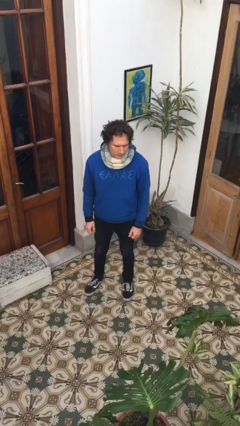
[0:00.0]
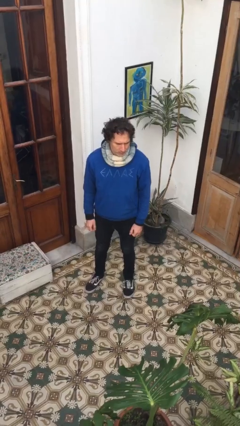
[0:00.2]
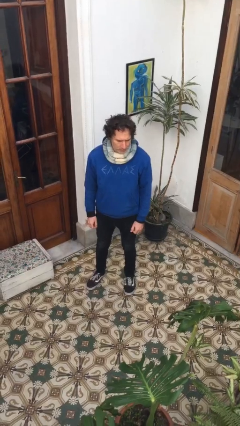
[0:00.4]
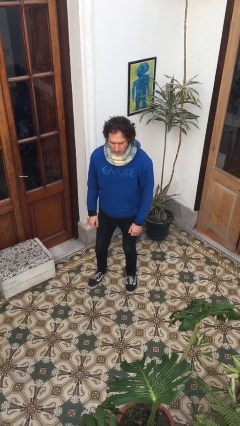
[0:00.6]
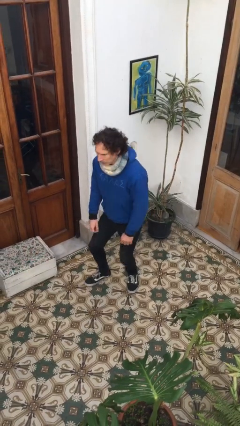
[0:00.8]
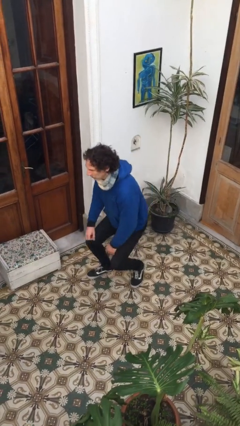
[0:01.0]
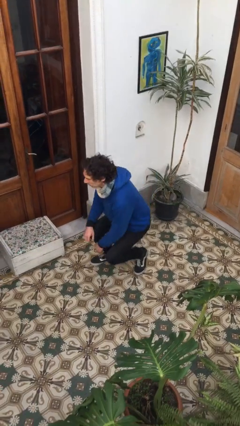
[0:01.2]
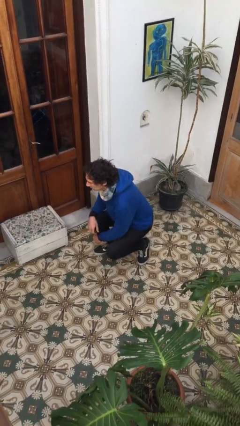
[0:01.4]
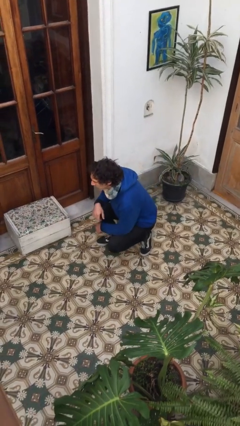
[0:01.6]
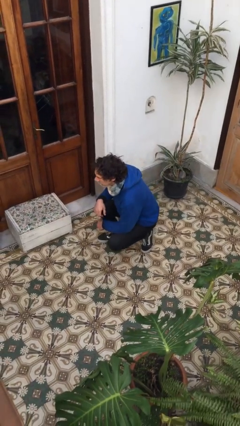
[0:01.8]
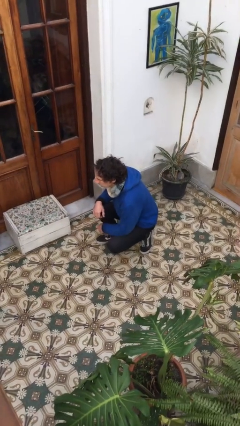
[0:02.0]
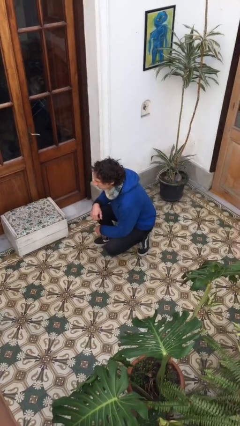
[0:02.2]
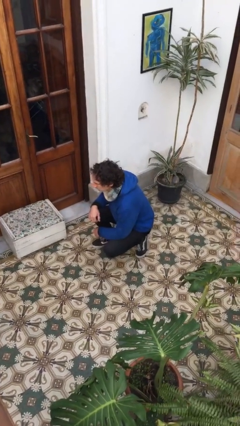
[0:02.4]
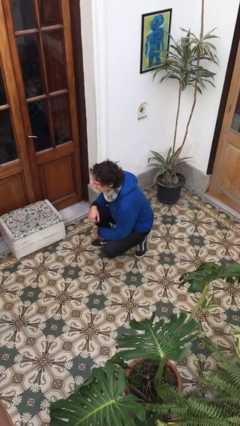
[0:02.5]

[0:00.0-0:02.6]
person squats

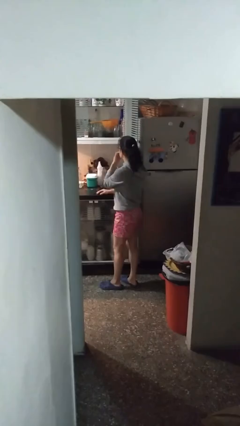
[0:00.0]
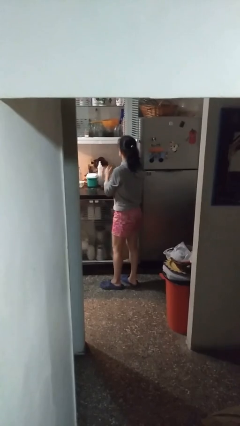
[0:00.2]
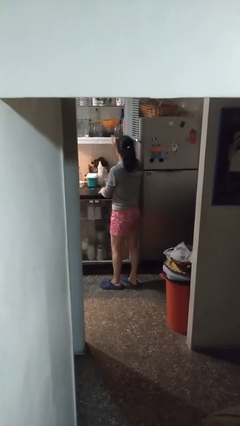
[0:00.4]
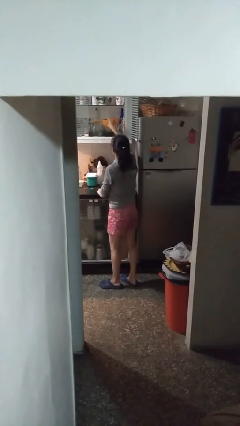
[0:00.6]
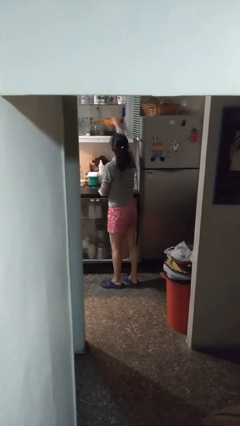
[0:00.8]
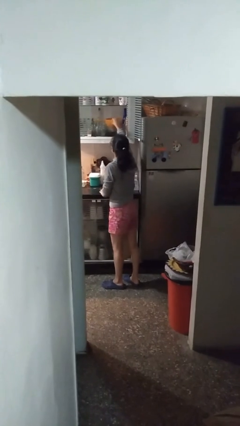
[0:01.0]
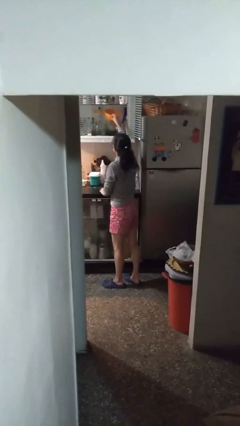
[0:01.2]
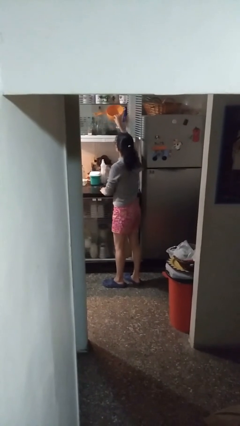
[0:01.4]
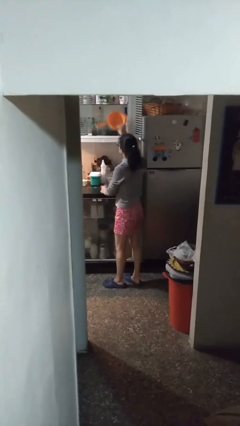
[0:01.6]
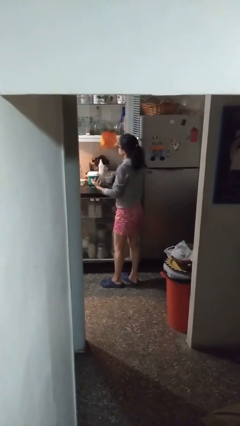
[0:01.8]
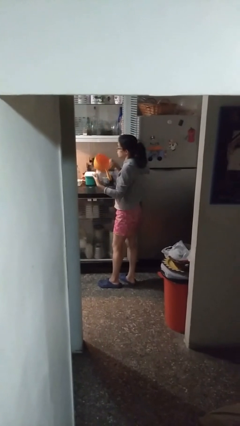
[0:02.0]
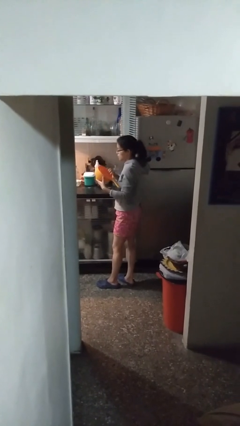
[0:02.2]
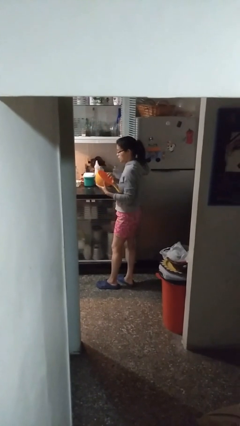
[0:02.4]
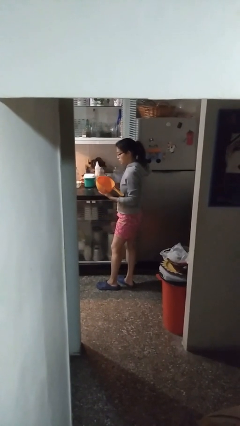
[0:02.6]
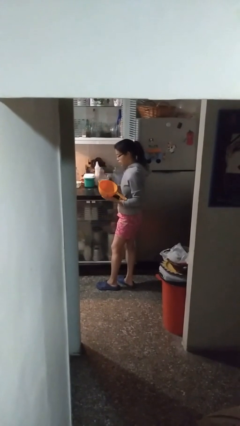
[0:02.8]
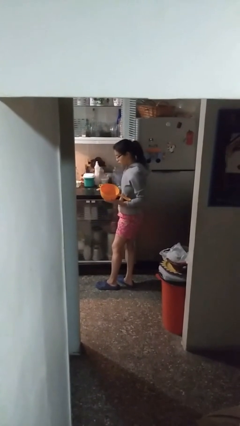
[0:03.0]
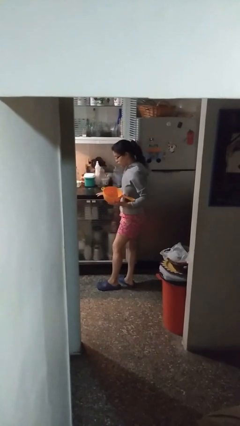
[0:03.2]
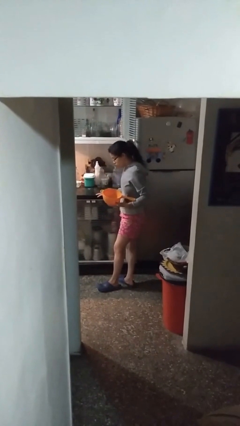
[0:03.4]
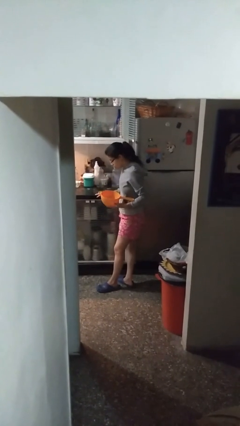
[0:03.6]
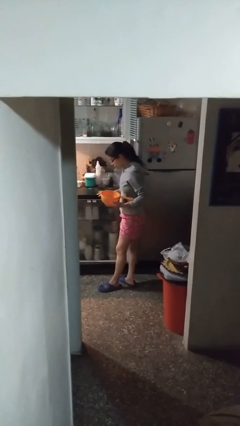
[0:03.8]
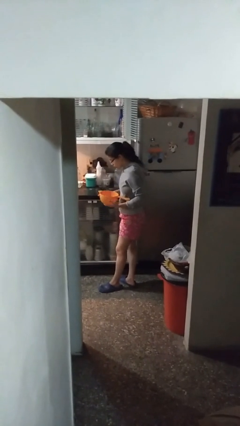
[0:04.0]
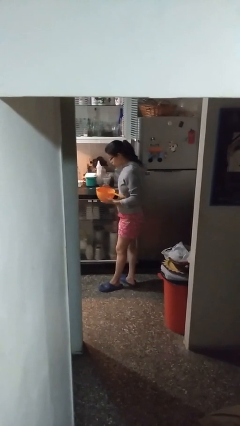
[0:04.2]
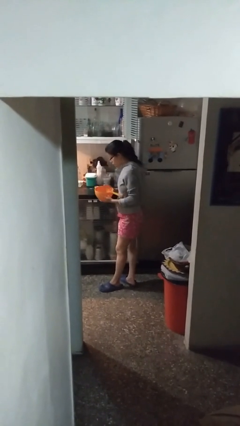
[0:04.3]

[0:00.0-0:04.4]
person picks up object from cabinet

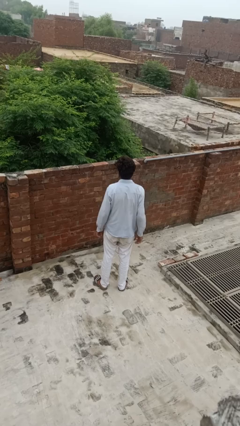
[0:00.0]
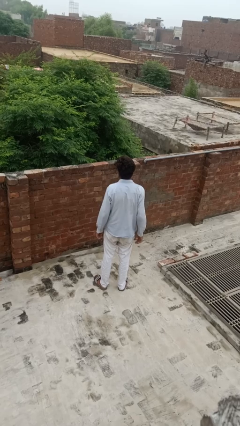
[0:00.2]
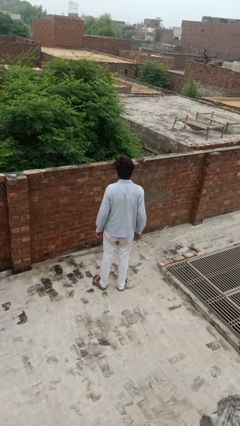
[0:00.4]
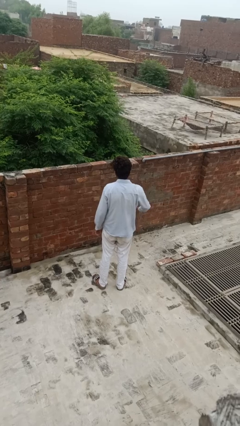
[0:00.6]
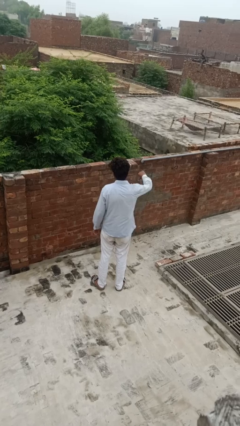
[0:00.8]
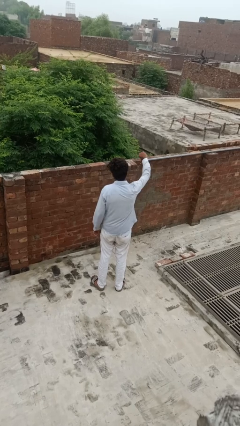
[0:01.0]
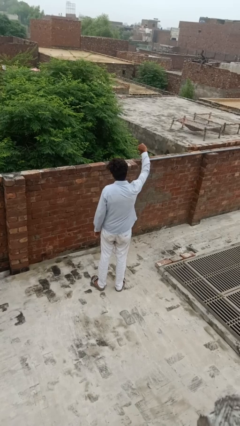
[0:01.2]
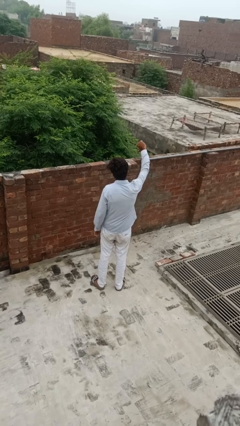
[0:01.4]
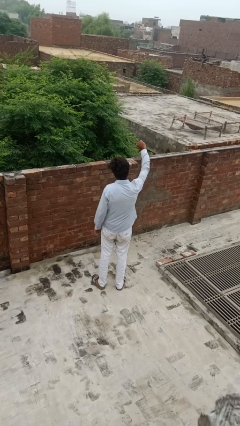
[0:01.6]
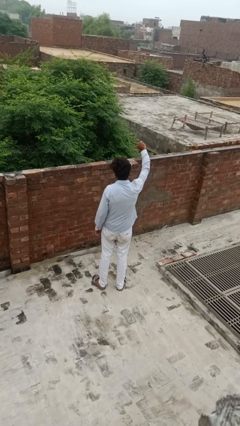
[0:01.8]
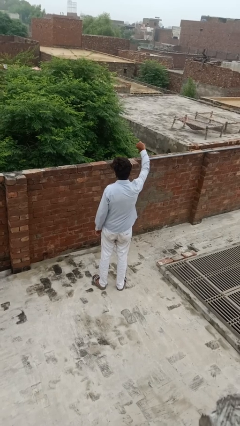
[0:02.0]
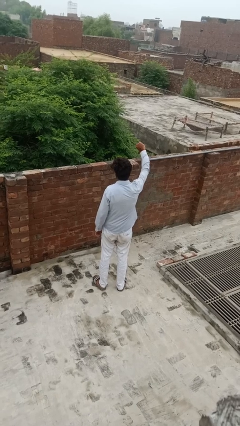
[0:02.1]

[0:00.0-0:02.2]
person gestures thumbs down

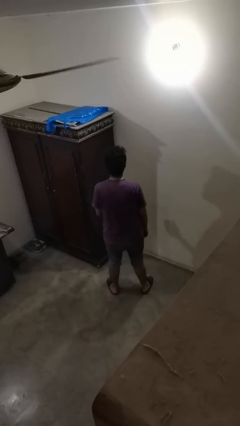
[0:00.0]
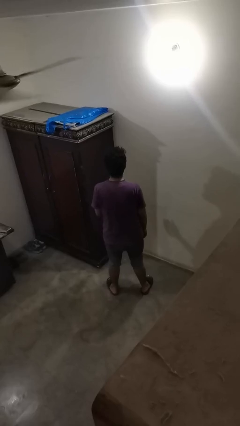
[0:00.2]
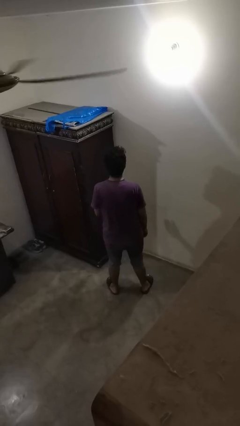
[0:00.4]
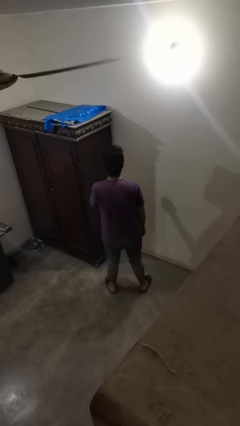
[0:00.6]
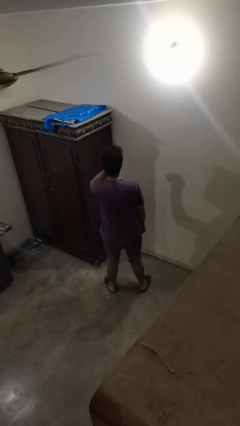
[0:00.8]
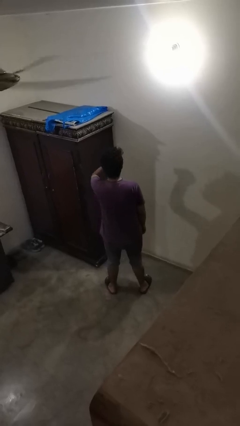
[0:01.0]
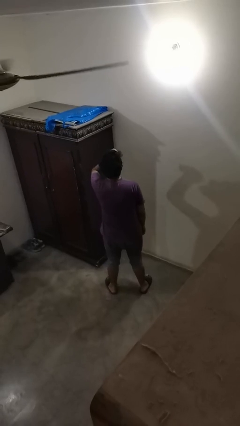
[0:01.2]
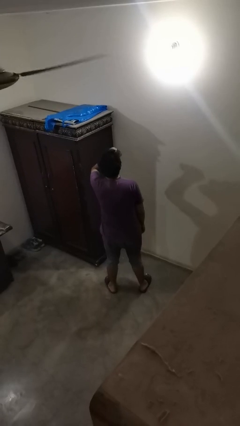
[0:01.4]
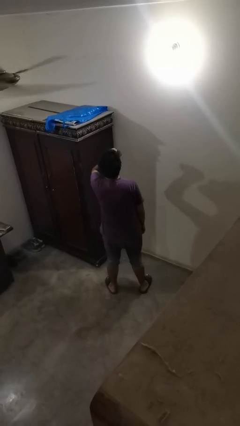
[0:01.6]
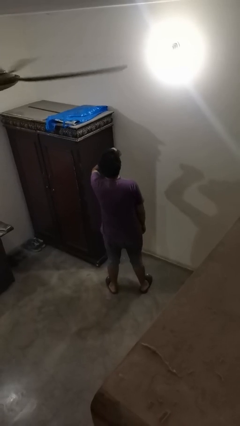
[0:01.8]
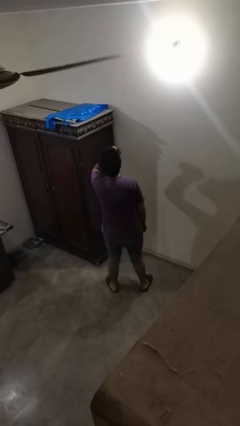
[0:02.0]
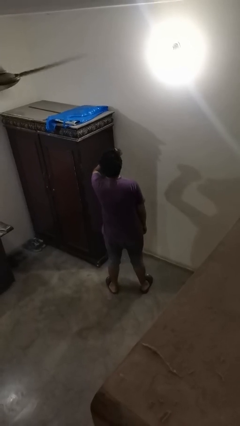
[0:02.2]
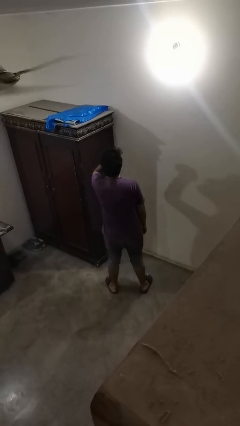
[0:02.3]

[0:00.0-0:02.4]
person drinks from beverage can

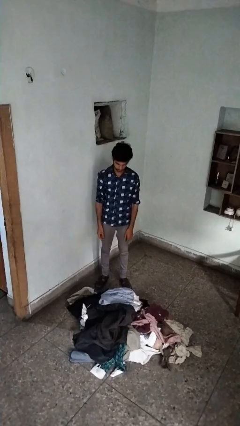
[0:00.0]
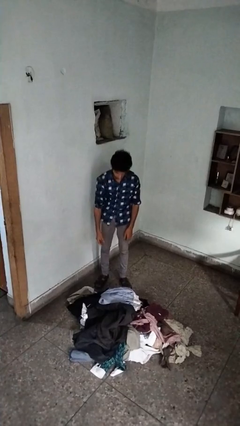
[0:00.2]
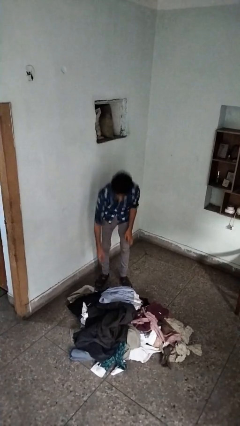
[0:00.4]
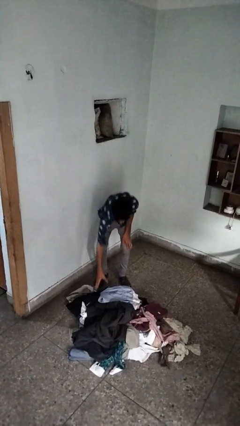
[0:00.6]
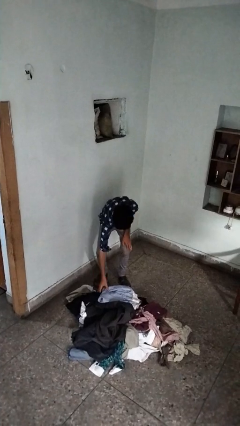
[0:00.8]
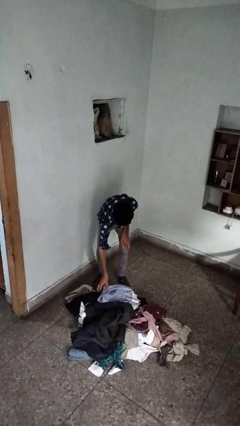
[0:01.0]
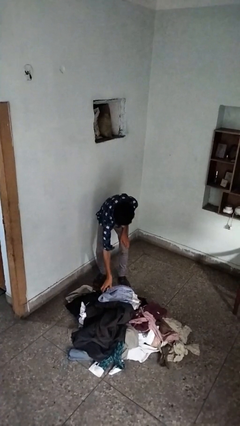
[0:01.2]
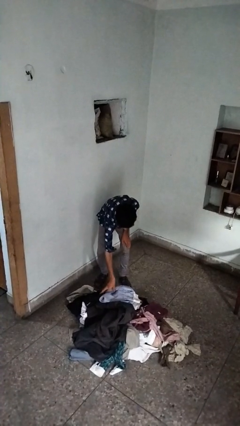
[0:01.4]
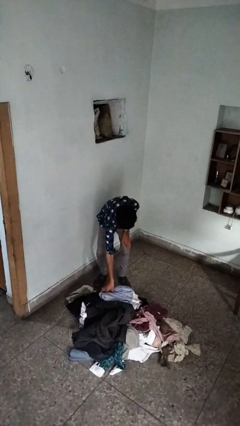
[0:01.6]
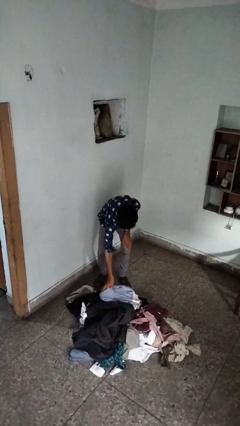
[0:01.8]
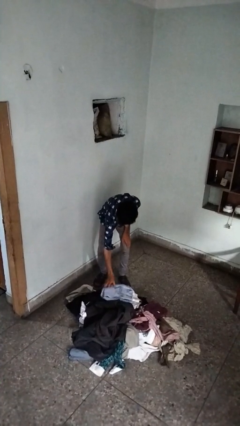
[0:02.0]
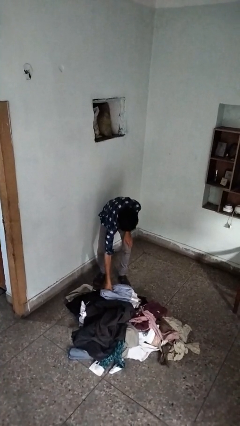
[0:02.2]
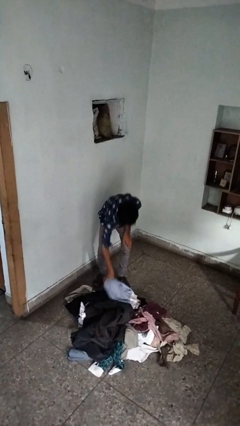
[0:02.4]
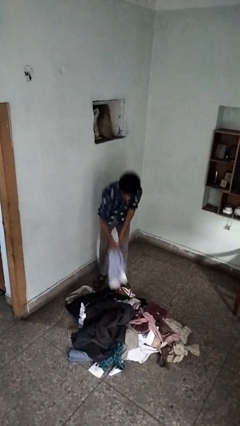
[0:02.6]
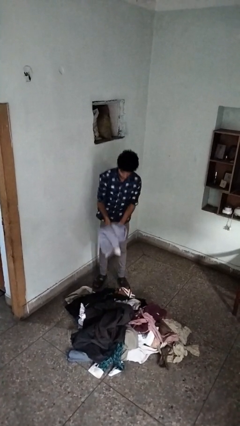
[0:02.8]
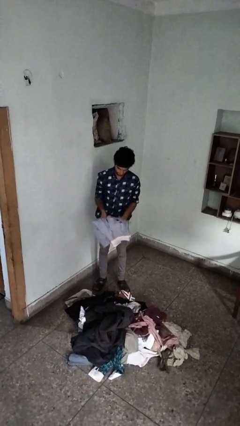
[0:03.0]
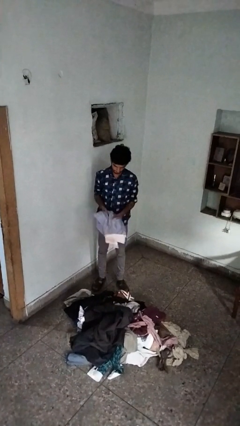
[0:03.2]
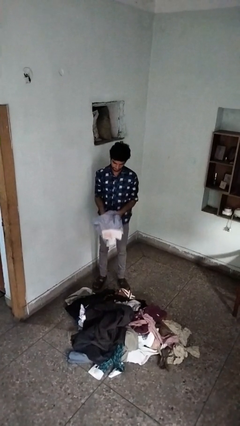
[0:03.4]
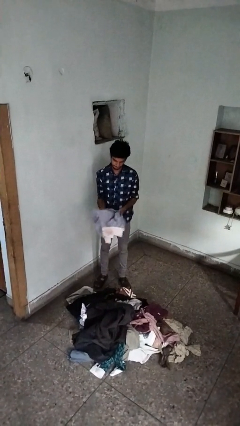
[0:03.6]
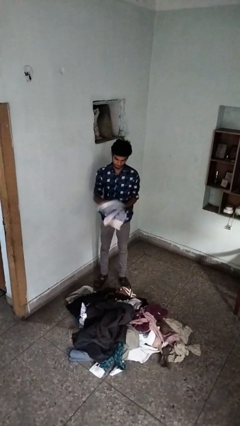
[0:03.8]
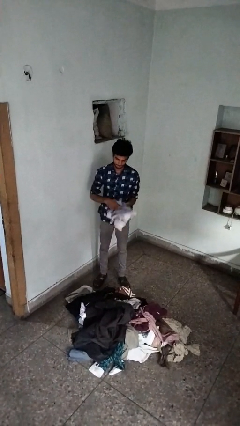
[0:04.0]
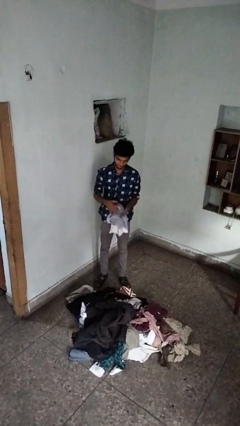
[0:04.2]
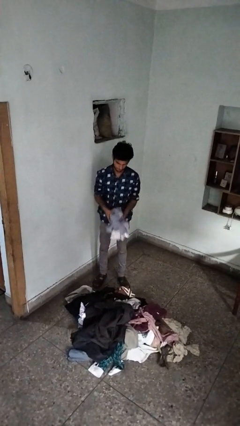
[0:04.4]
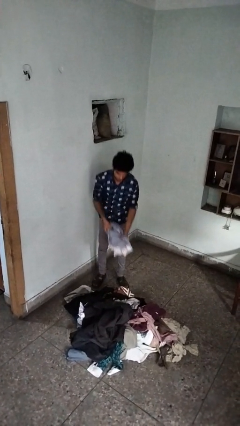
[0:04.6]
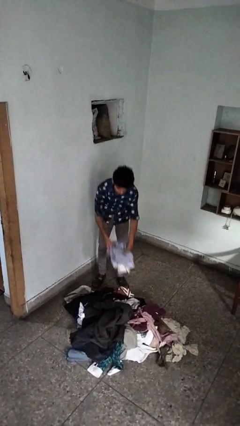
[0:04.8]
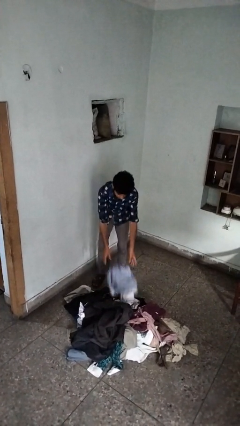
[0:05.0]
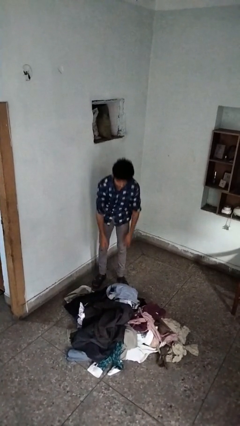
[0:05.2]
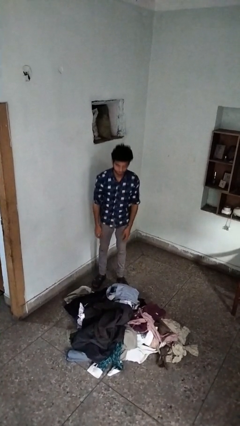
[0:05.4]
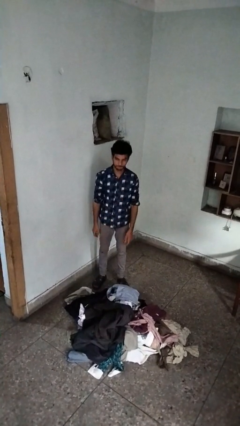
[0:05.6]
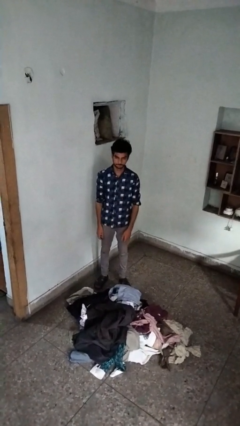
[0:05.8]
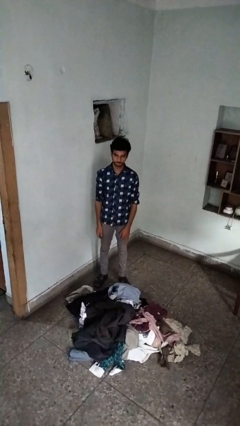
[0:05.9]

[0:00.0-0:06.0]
person folds shirt
